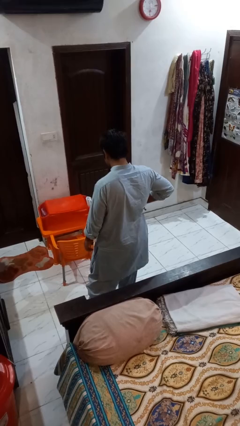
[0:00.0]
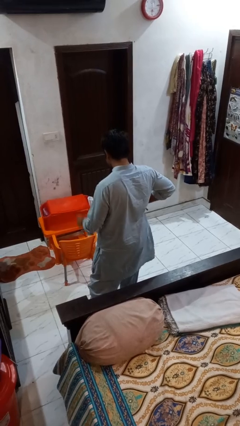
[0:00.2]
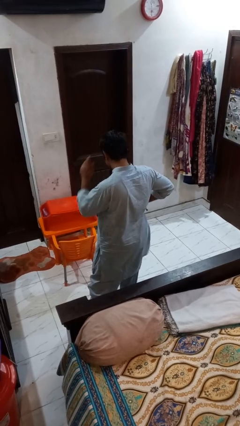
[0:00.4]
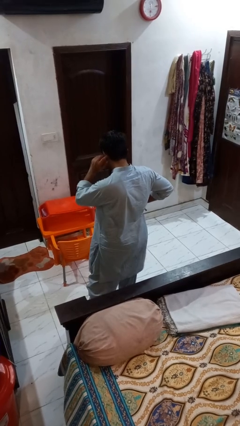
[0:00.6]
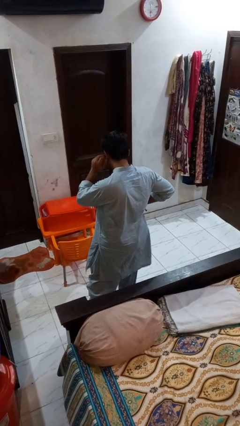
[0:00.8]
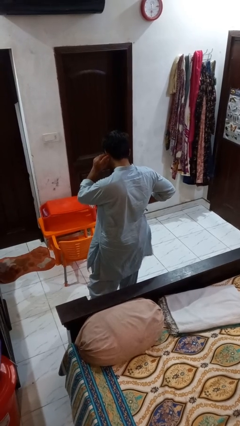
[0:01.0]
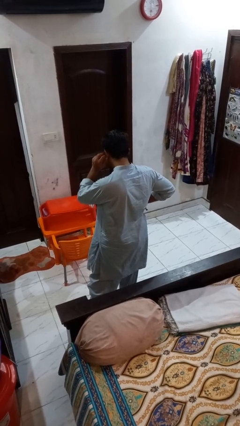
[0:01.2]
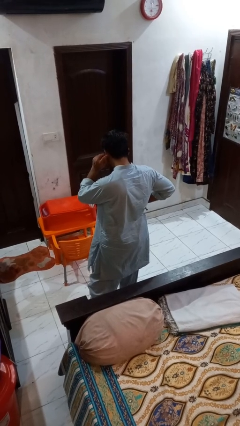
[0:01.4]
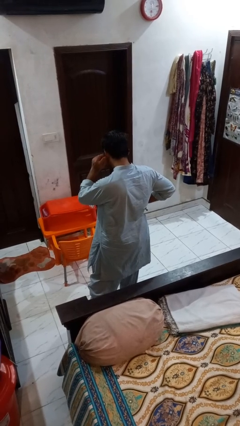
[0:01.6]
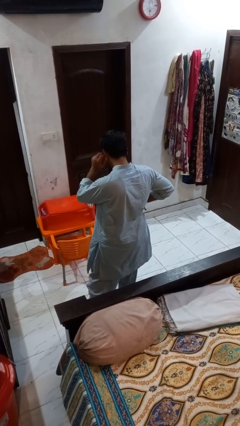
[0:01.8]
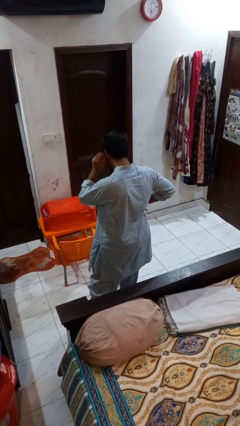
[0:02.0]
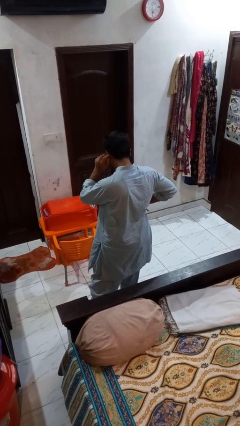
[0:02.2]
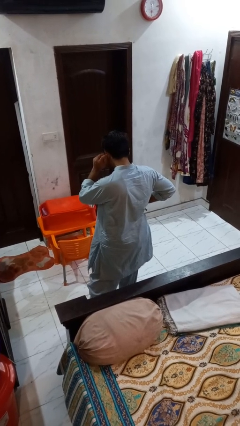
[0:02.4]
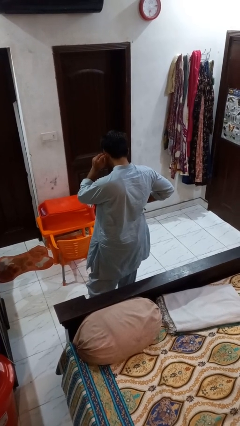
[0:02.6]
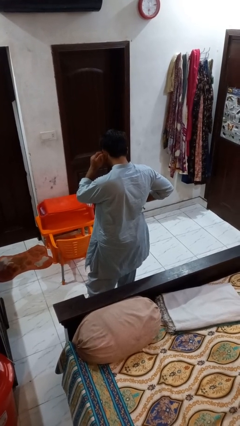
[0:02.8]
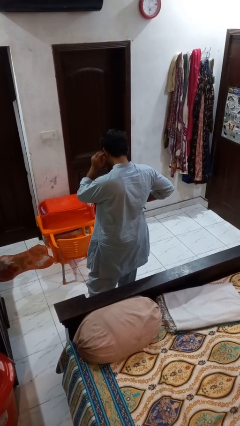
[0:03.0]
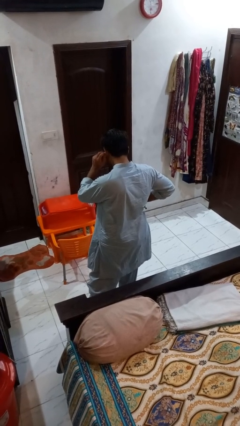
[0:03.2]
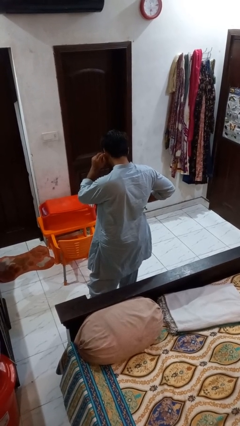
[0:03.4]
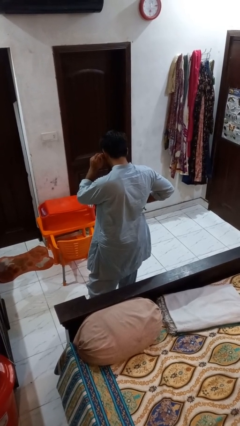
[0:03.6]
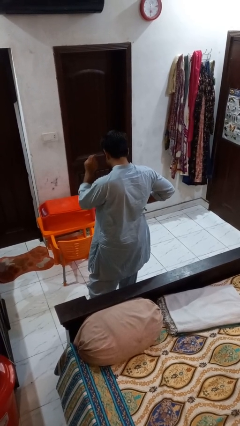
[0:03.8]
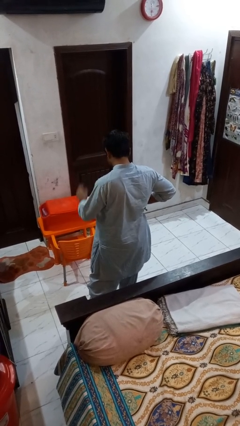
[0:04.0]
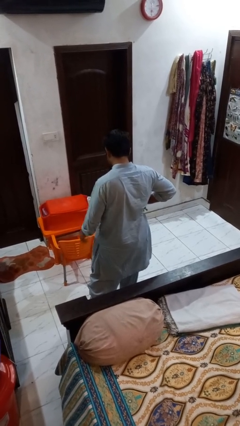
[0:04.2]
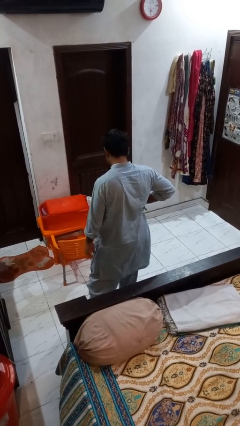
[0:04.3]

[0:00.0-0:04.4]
person touches earlobe

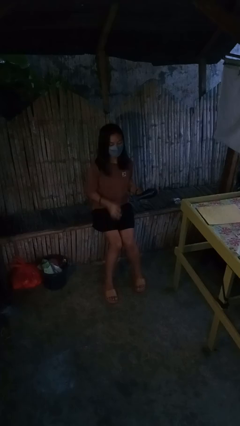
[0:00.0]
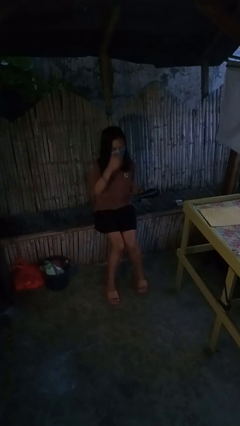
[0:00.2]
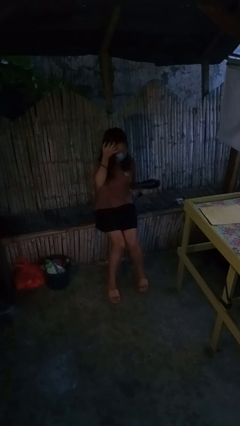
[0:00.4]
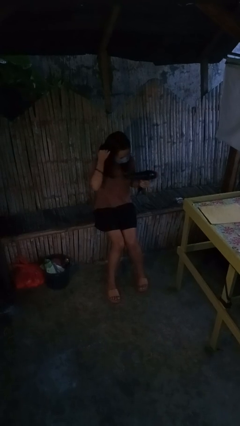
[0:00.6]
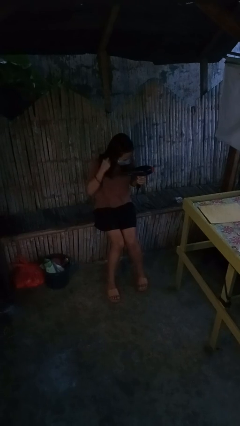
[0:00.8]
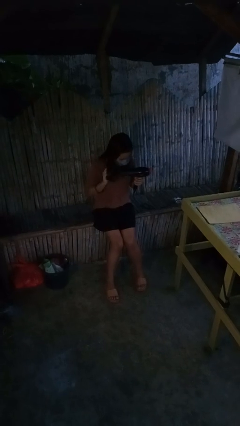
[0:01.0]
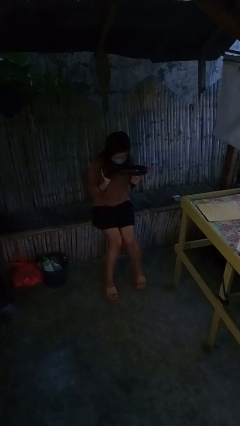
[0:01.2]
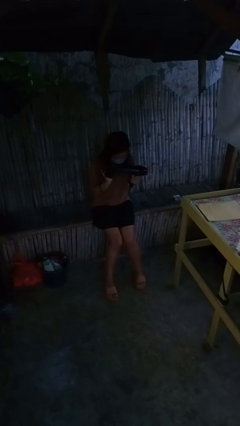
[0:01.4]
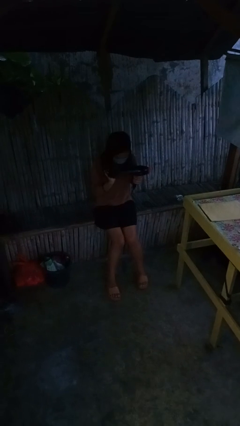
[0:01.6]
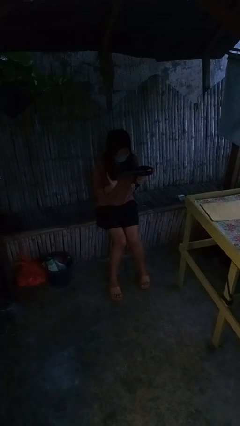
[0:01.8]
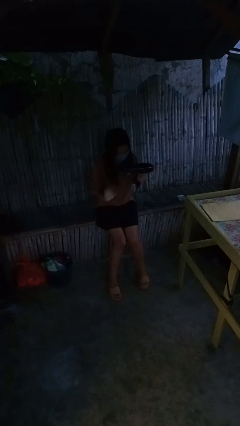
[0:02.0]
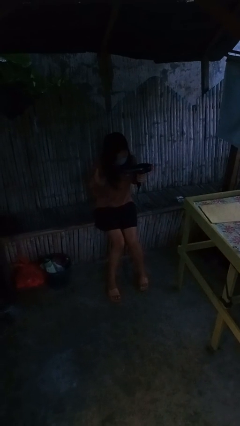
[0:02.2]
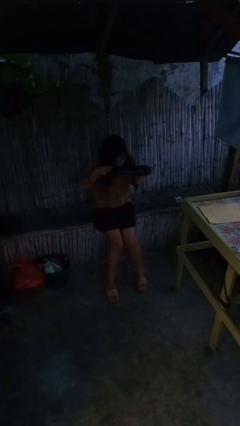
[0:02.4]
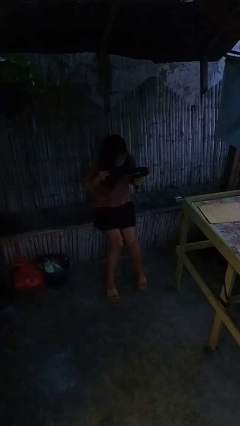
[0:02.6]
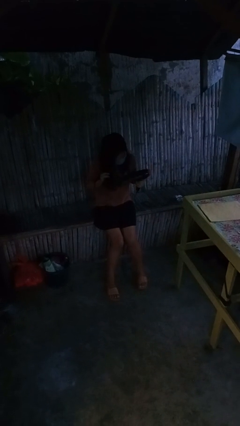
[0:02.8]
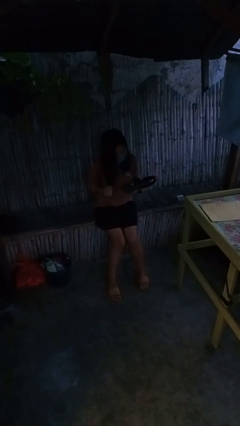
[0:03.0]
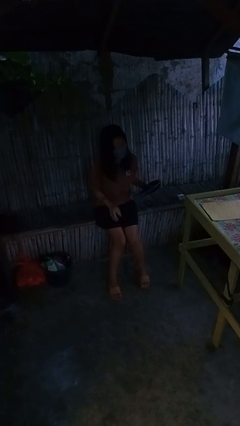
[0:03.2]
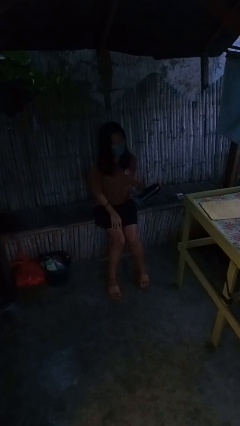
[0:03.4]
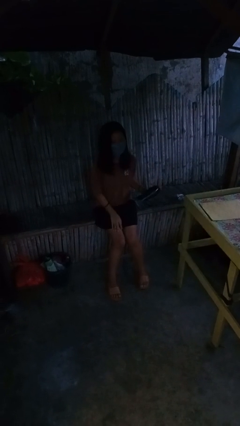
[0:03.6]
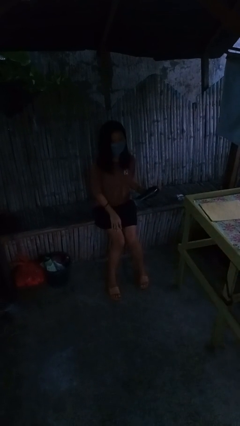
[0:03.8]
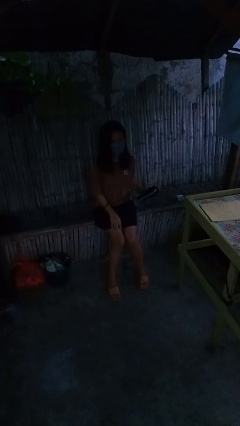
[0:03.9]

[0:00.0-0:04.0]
person dries hair with hairdryer

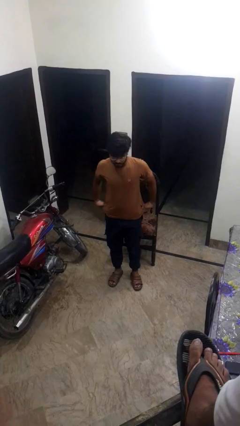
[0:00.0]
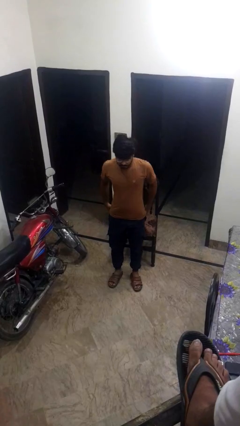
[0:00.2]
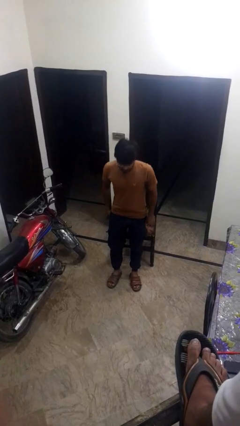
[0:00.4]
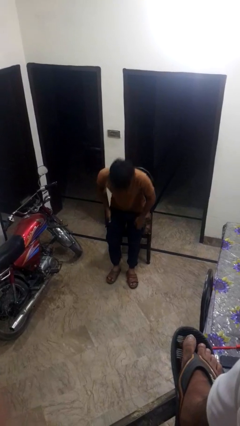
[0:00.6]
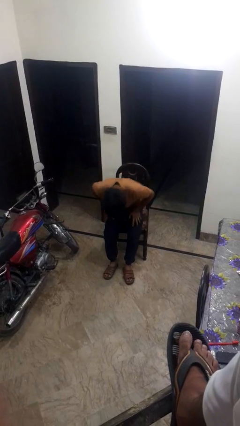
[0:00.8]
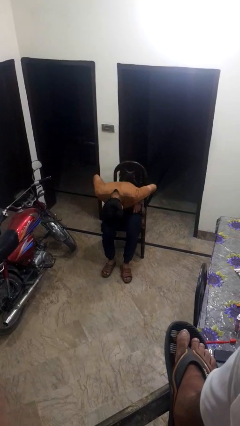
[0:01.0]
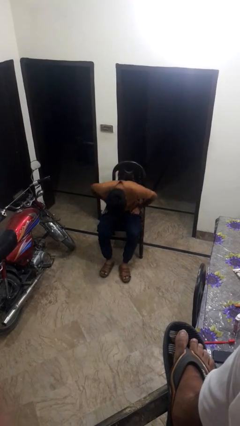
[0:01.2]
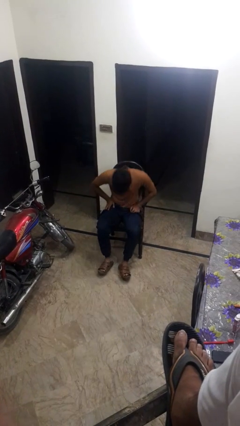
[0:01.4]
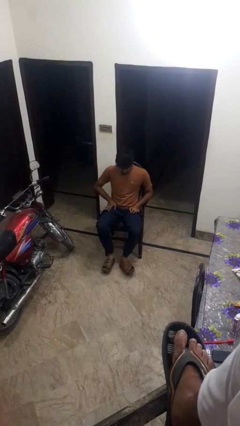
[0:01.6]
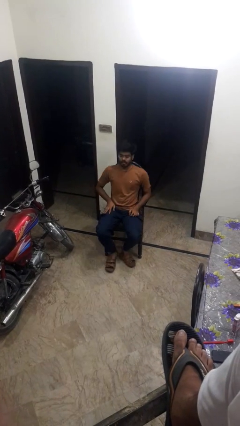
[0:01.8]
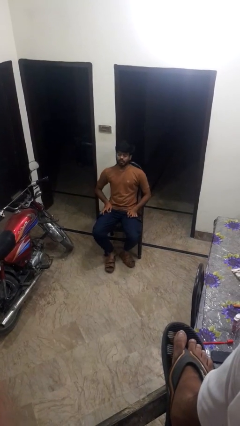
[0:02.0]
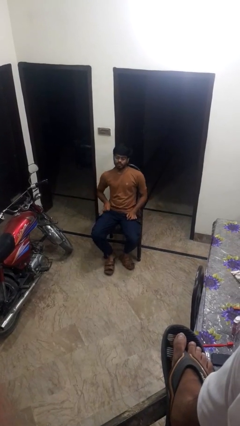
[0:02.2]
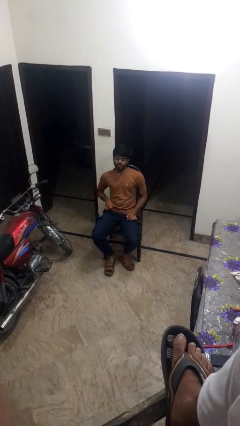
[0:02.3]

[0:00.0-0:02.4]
person sits down

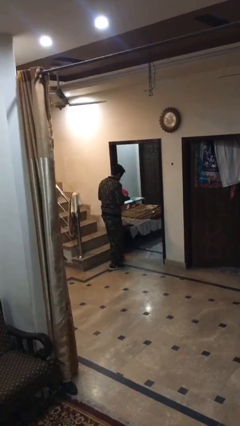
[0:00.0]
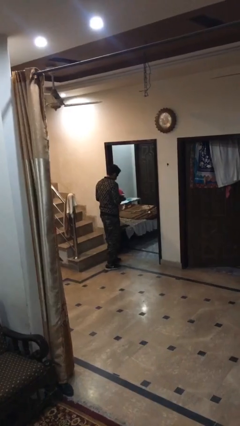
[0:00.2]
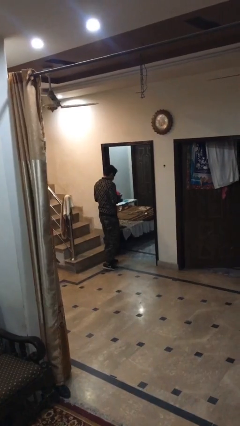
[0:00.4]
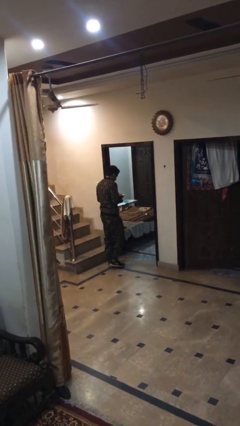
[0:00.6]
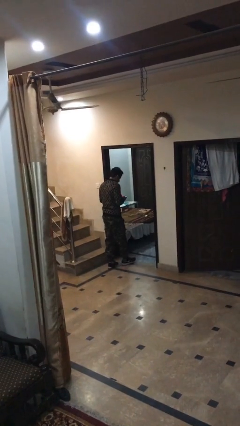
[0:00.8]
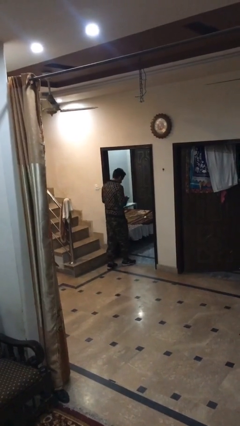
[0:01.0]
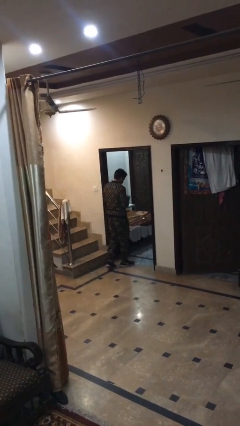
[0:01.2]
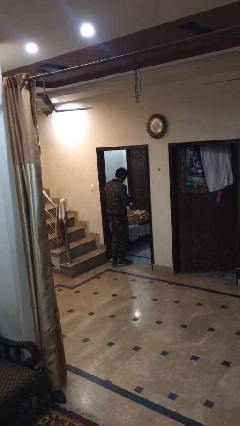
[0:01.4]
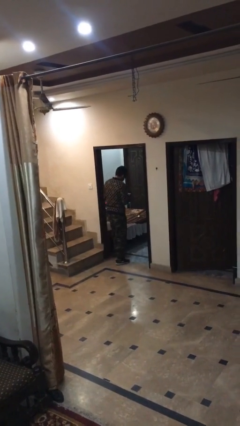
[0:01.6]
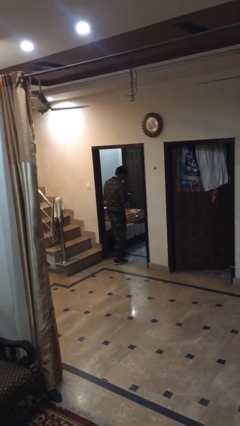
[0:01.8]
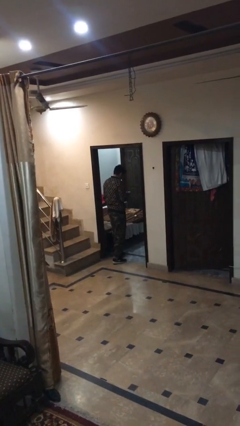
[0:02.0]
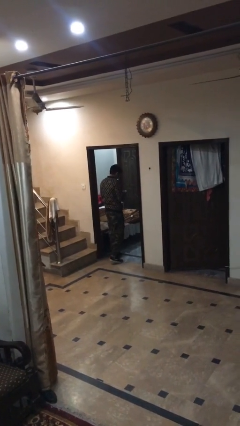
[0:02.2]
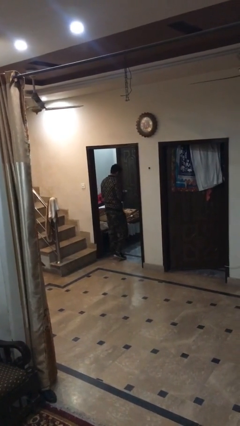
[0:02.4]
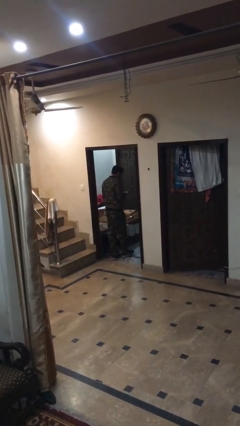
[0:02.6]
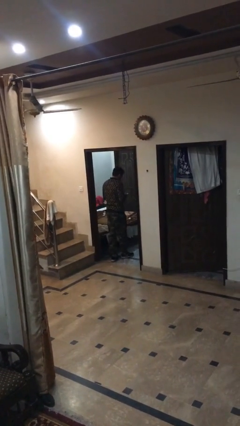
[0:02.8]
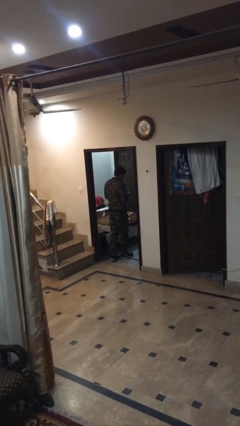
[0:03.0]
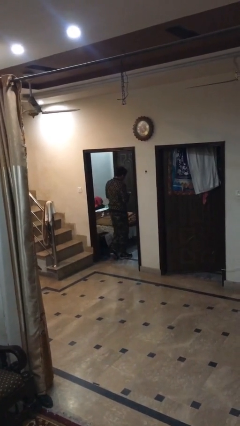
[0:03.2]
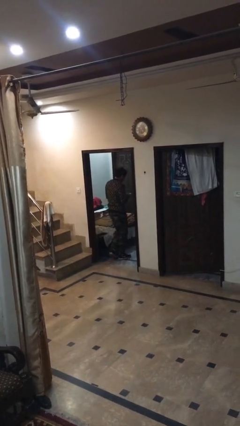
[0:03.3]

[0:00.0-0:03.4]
person enters scene through structure

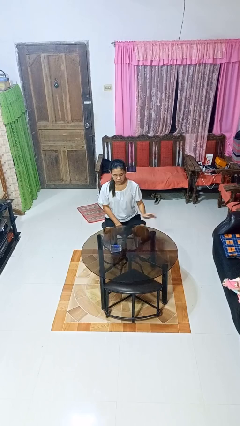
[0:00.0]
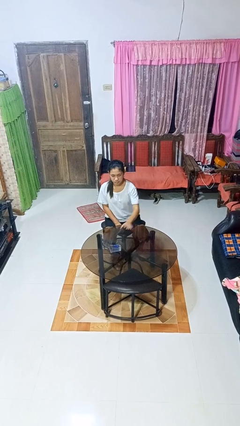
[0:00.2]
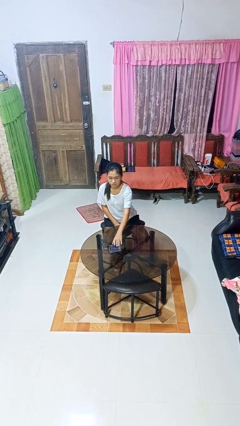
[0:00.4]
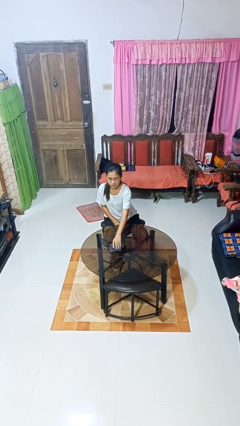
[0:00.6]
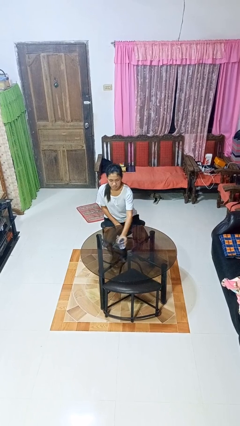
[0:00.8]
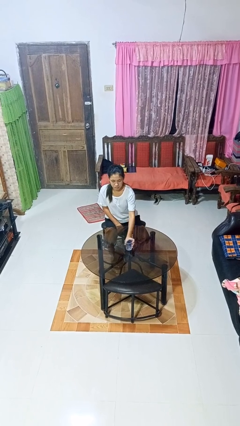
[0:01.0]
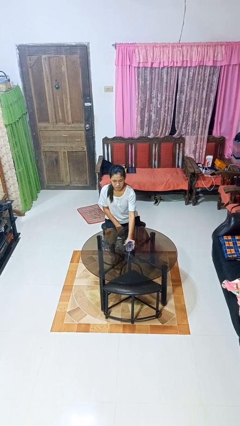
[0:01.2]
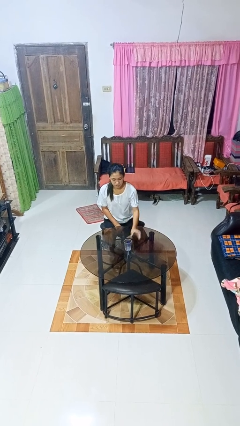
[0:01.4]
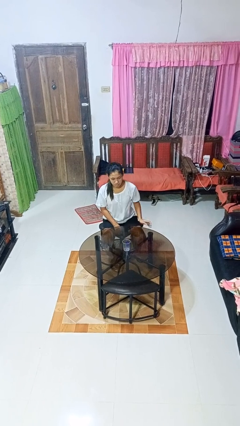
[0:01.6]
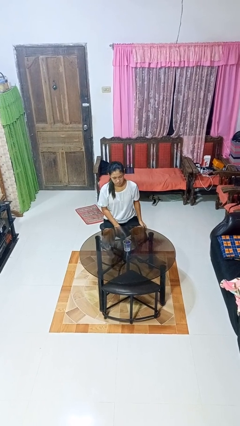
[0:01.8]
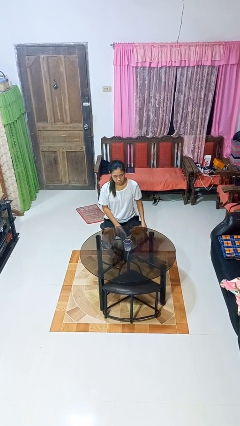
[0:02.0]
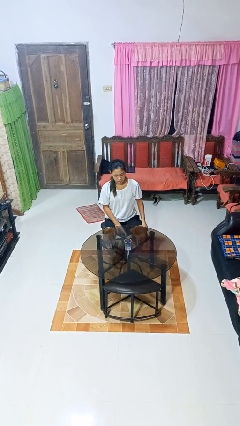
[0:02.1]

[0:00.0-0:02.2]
person sets upright glass

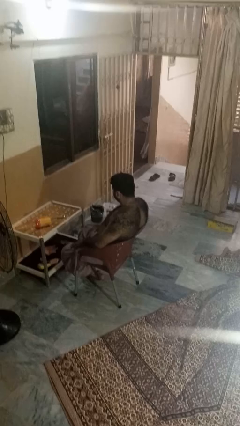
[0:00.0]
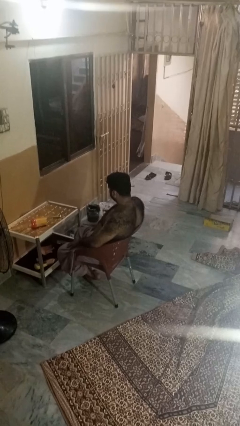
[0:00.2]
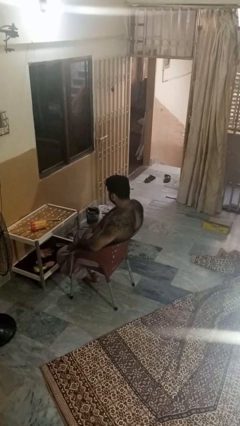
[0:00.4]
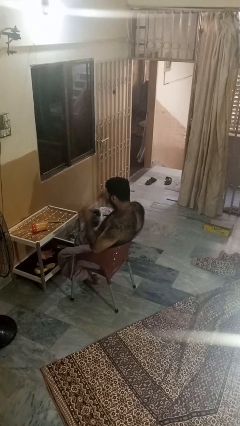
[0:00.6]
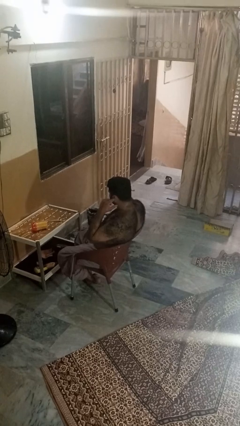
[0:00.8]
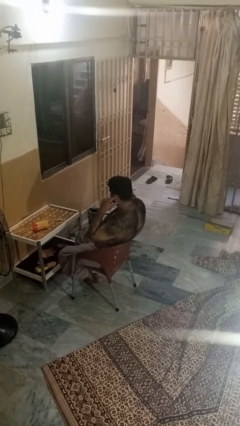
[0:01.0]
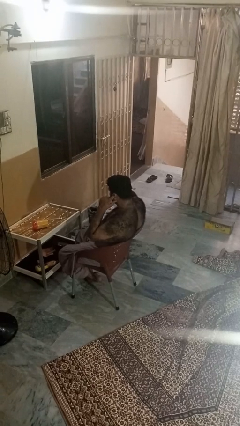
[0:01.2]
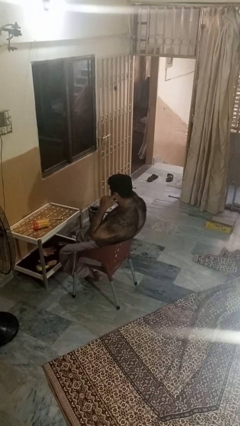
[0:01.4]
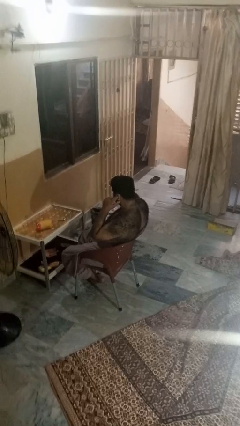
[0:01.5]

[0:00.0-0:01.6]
person puts fingers in ear
